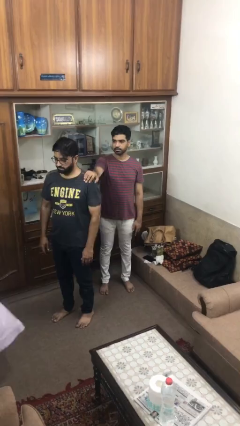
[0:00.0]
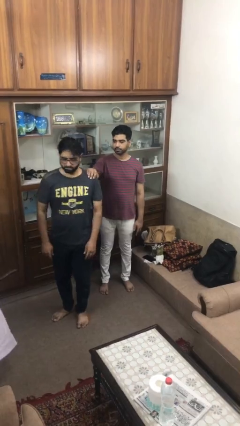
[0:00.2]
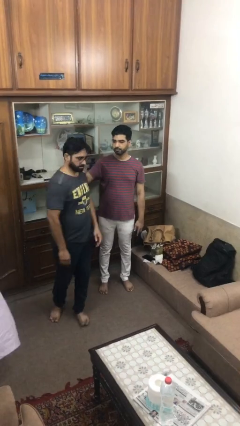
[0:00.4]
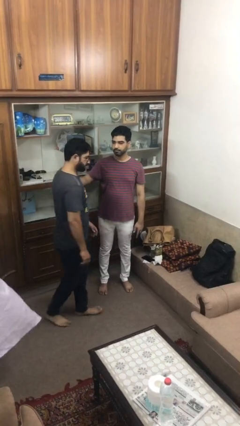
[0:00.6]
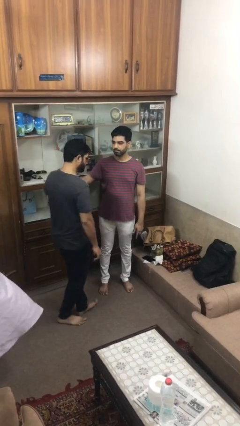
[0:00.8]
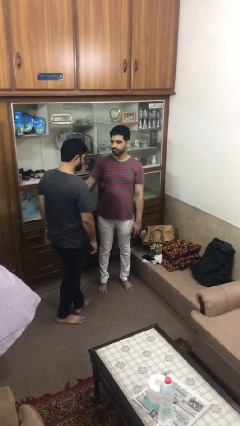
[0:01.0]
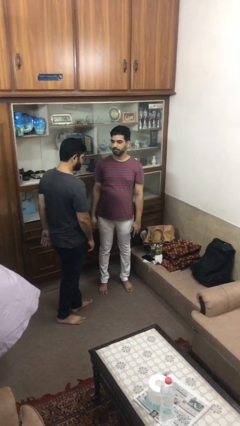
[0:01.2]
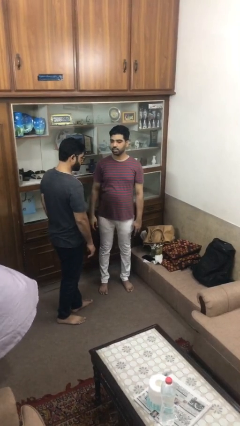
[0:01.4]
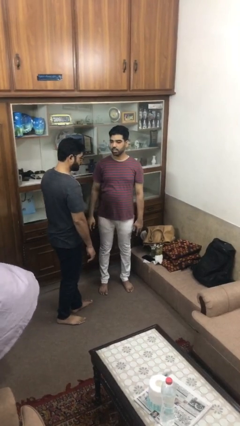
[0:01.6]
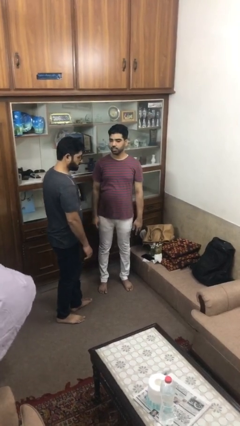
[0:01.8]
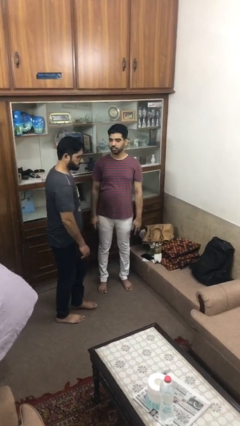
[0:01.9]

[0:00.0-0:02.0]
person spins person around

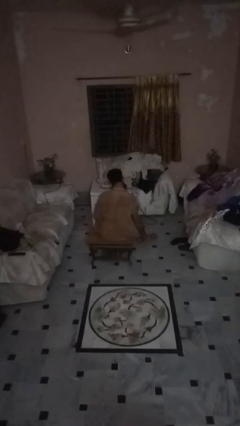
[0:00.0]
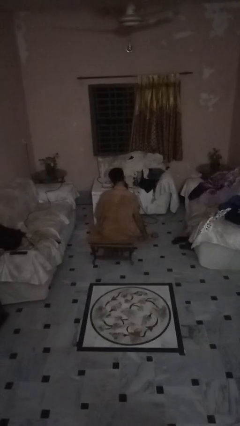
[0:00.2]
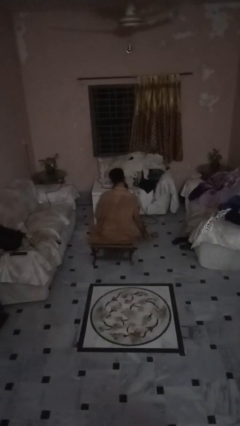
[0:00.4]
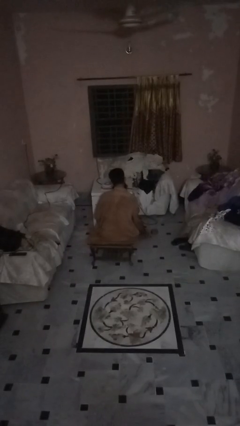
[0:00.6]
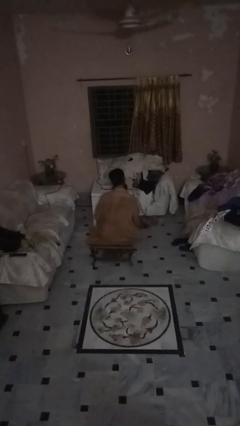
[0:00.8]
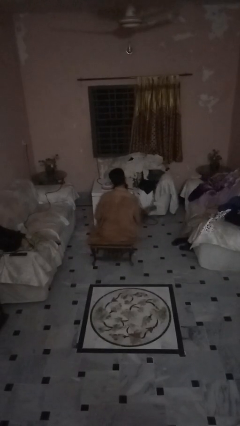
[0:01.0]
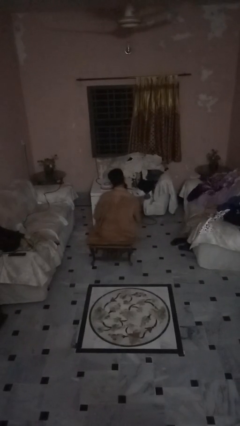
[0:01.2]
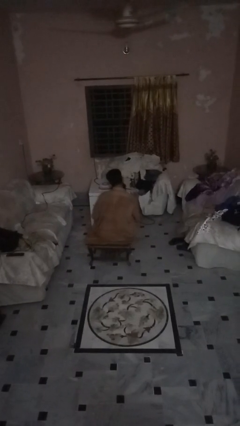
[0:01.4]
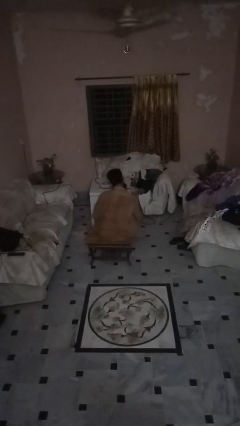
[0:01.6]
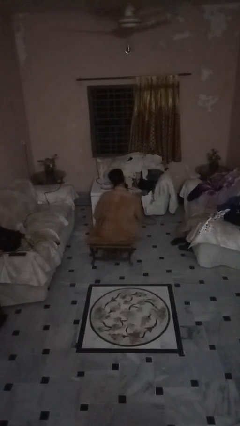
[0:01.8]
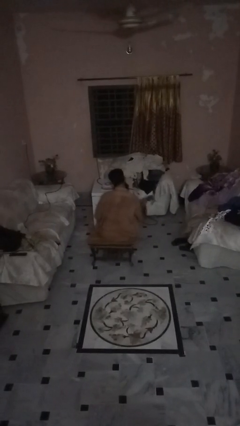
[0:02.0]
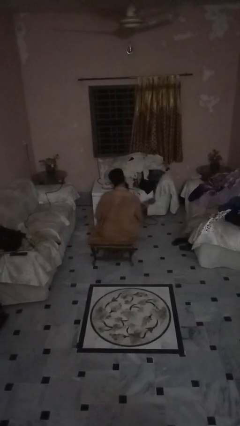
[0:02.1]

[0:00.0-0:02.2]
person lifts dumbbells

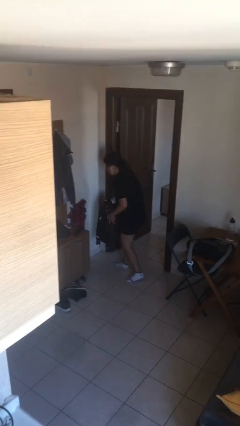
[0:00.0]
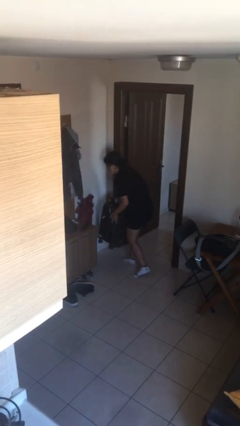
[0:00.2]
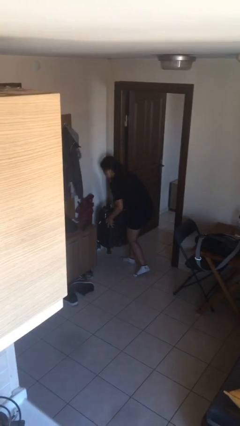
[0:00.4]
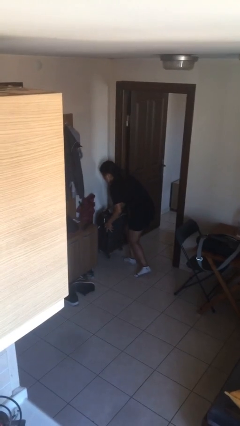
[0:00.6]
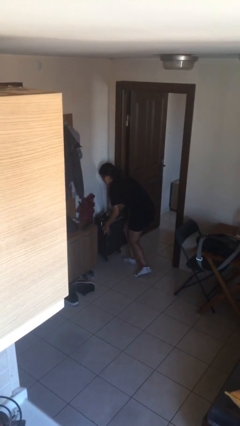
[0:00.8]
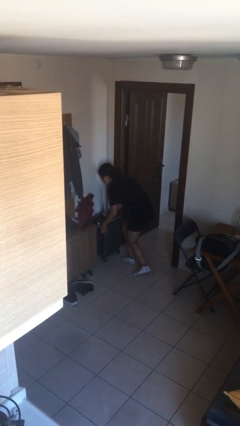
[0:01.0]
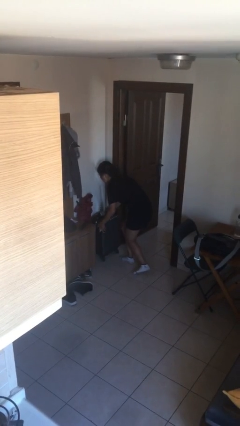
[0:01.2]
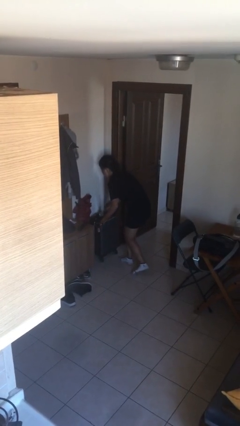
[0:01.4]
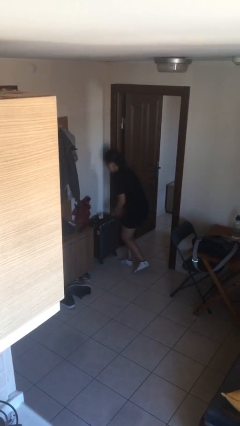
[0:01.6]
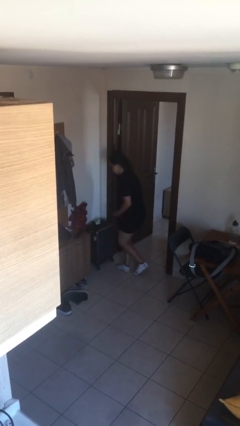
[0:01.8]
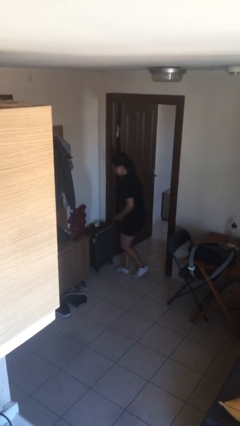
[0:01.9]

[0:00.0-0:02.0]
person puts down object on floor

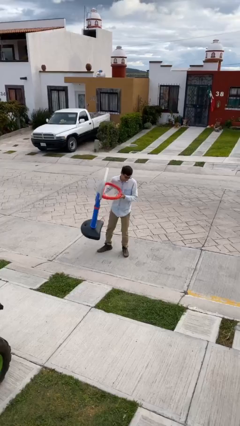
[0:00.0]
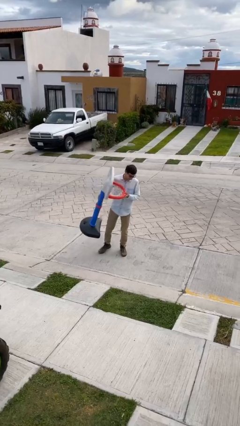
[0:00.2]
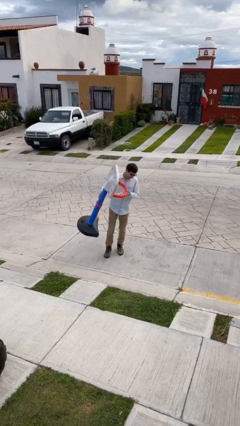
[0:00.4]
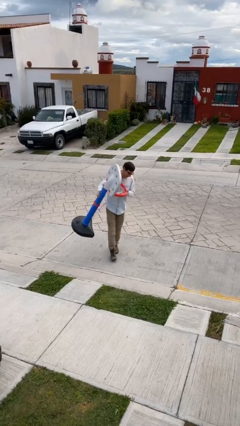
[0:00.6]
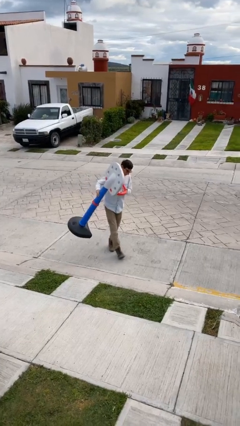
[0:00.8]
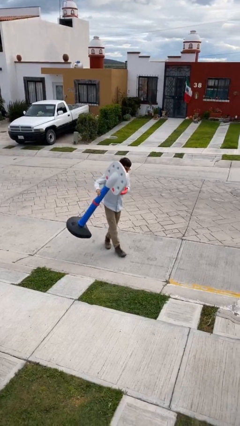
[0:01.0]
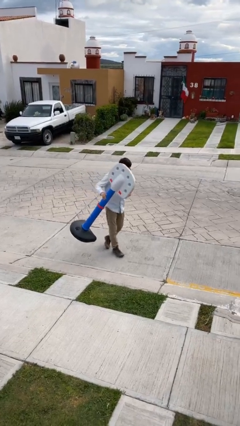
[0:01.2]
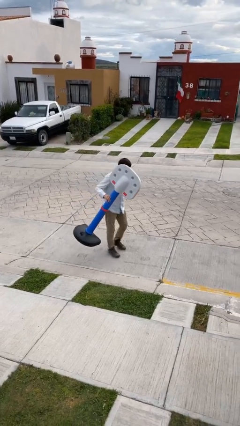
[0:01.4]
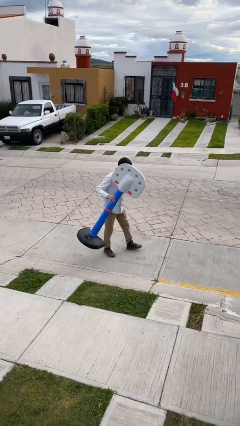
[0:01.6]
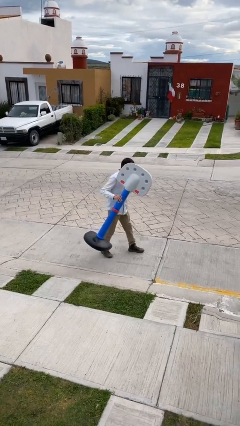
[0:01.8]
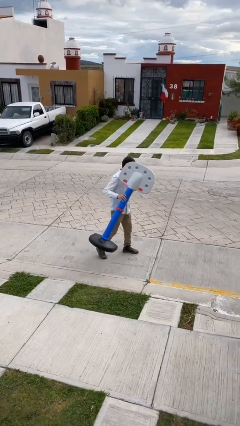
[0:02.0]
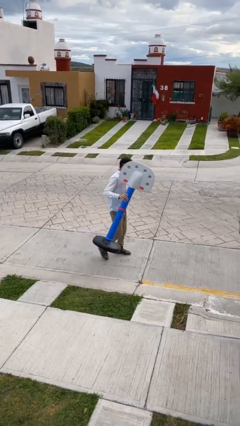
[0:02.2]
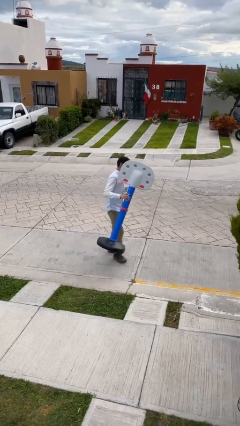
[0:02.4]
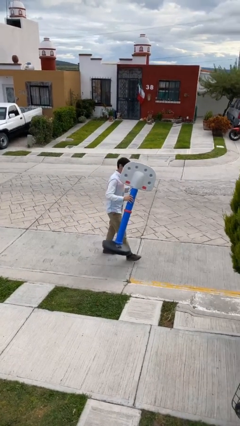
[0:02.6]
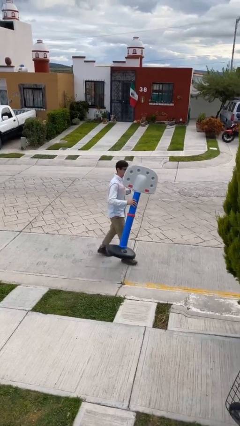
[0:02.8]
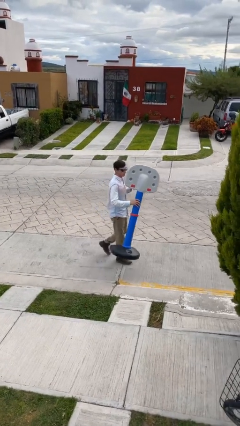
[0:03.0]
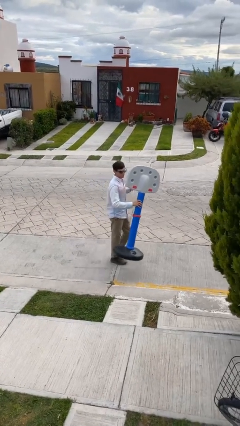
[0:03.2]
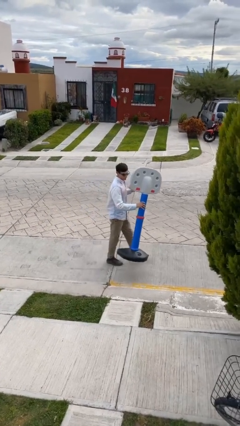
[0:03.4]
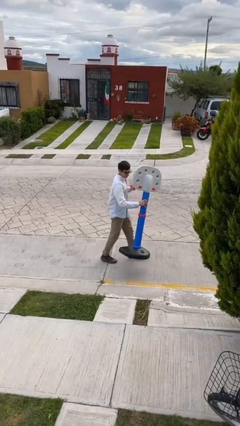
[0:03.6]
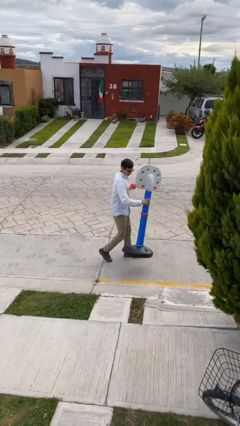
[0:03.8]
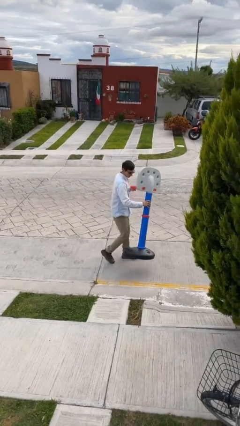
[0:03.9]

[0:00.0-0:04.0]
person carries heavy object

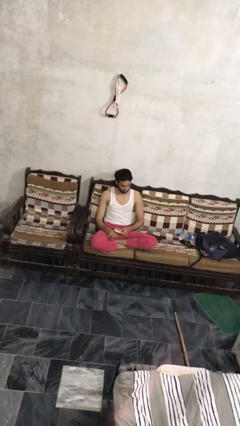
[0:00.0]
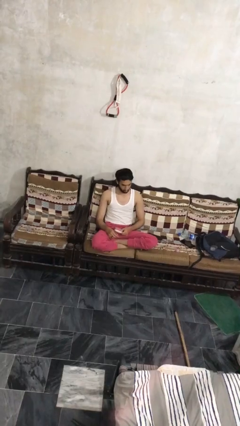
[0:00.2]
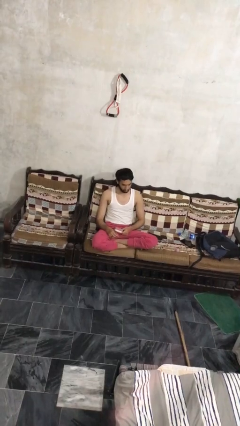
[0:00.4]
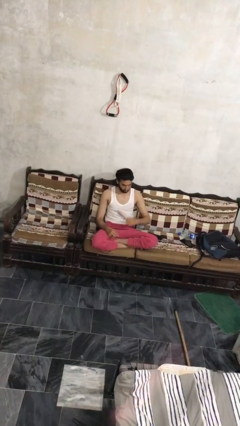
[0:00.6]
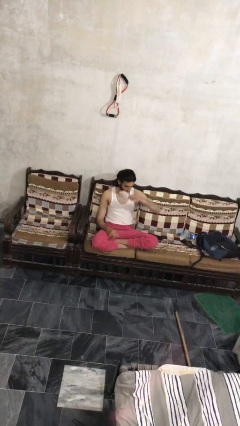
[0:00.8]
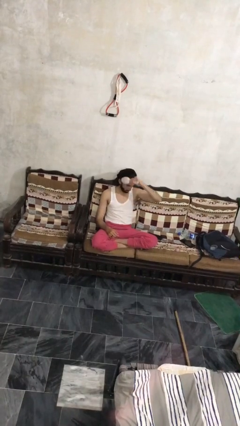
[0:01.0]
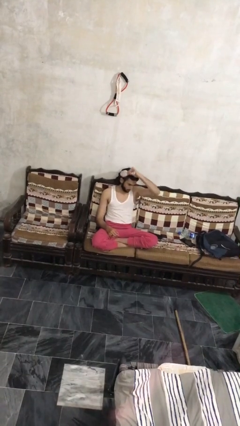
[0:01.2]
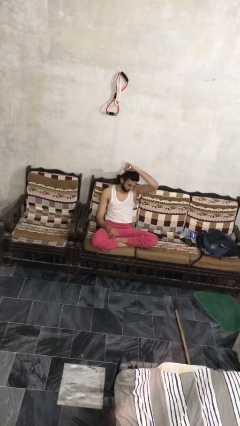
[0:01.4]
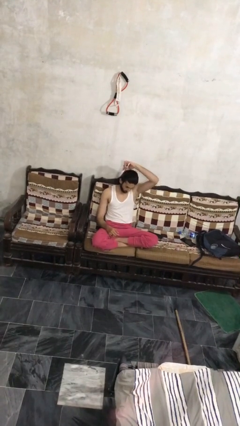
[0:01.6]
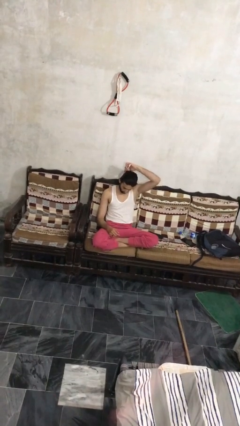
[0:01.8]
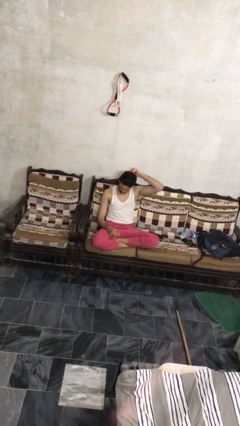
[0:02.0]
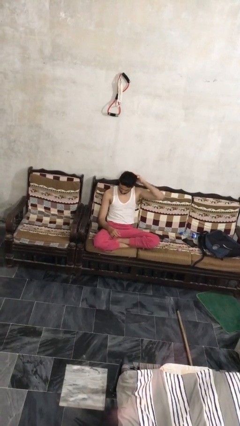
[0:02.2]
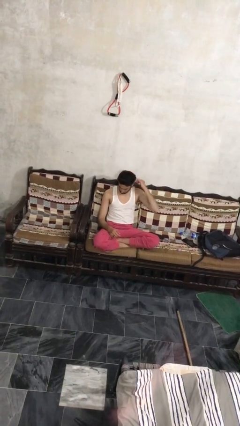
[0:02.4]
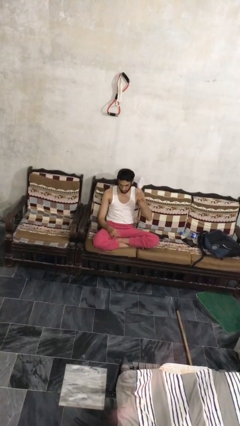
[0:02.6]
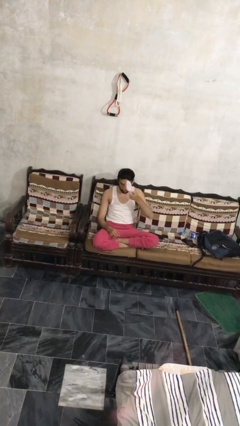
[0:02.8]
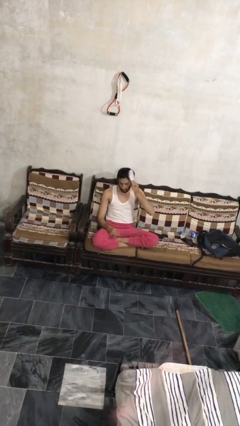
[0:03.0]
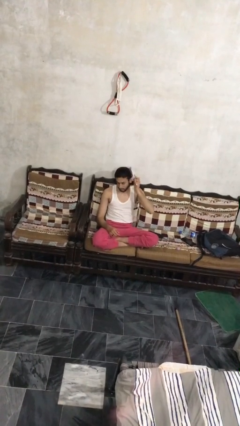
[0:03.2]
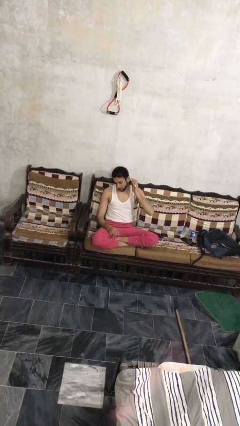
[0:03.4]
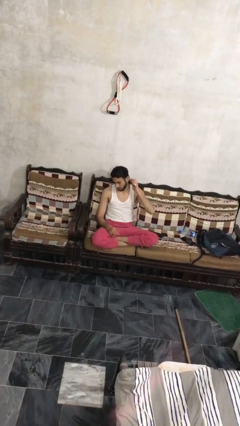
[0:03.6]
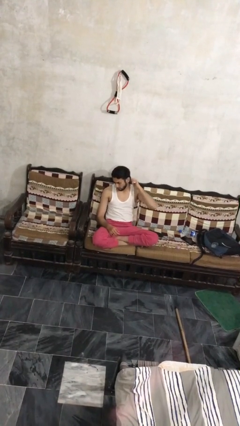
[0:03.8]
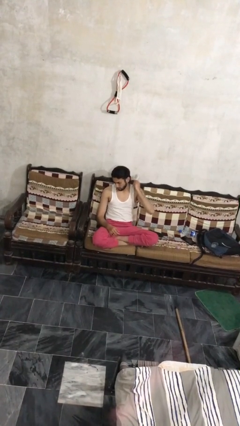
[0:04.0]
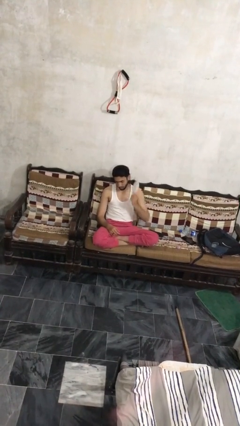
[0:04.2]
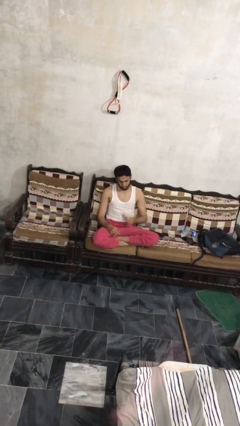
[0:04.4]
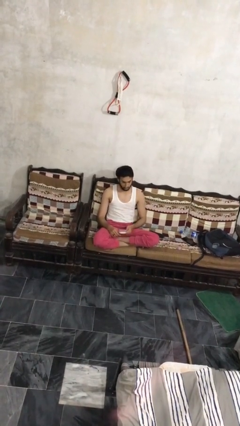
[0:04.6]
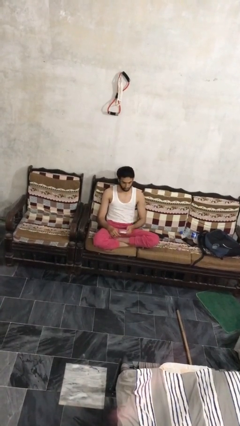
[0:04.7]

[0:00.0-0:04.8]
person brushes hair

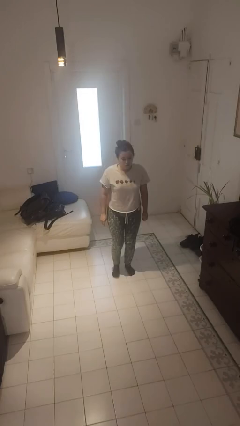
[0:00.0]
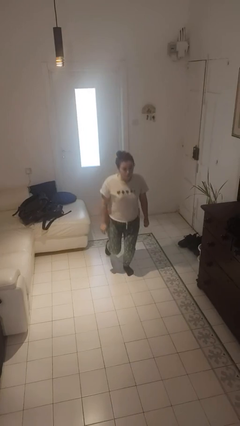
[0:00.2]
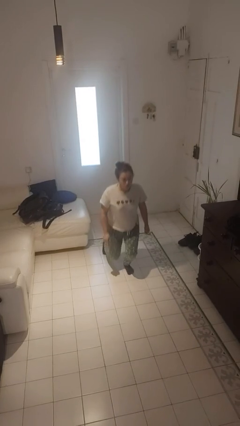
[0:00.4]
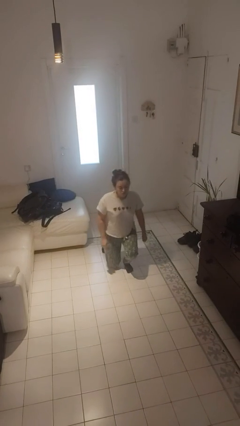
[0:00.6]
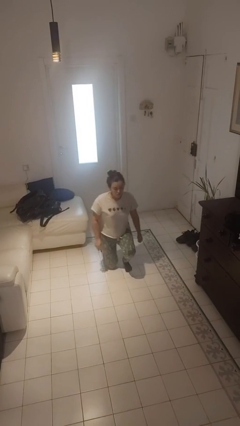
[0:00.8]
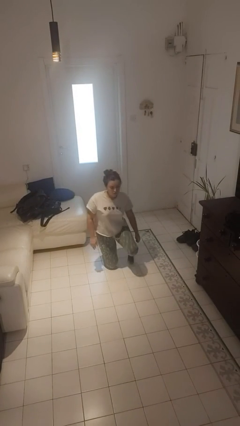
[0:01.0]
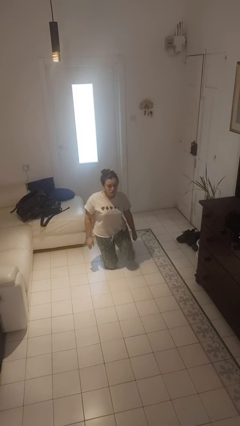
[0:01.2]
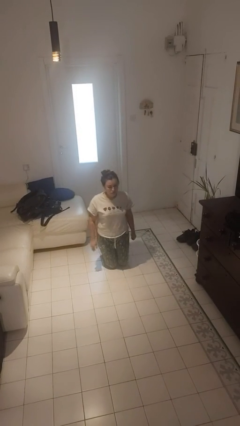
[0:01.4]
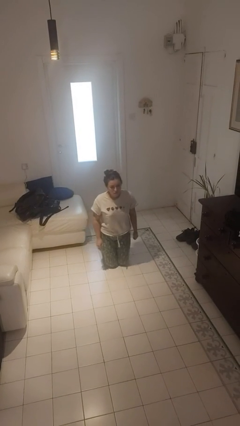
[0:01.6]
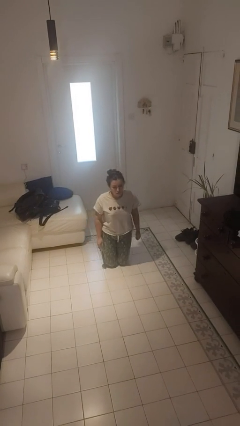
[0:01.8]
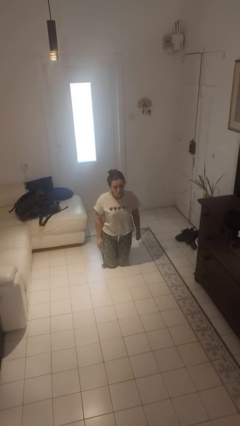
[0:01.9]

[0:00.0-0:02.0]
person kneels

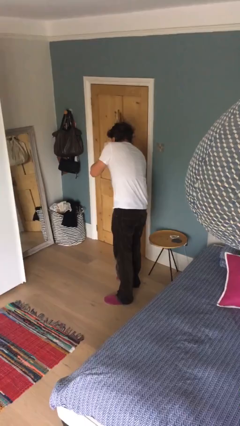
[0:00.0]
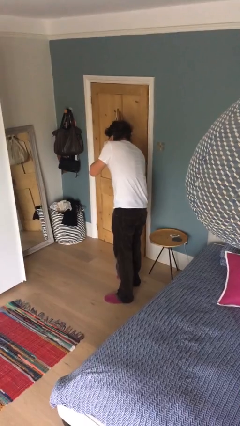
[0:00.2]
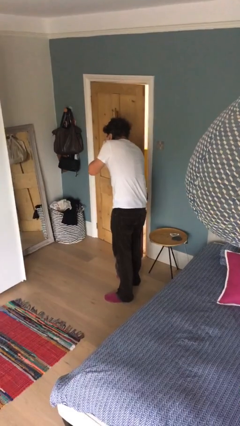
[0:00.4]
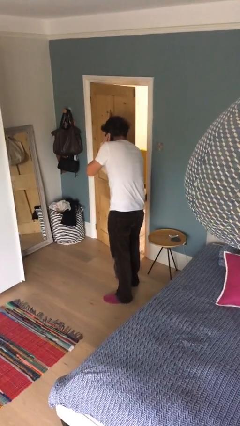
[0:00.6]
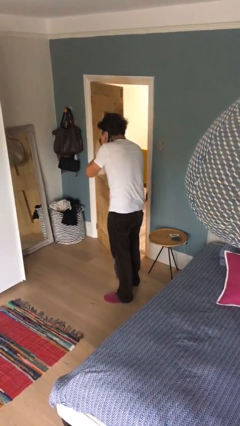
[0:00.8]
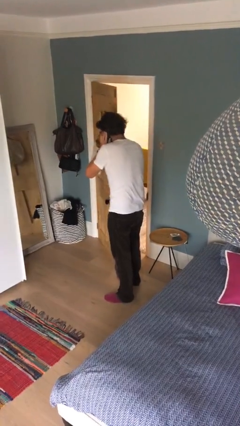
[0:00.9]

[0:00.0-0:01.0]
person opens facility door
